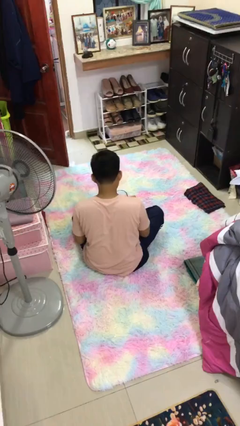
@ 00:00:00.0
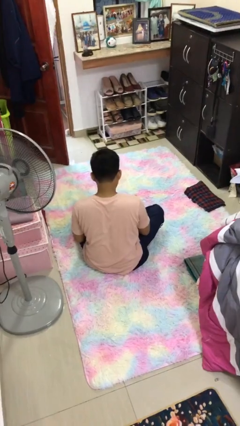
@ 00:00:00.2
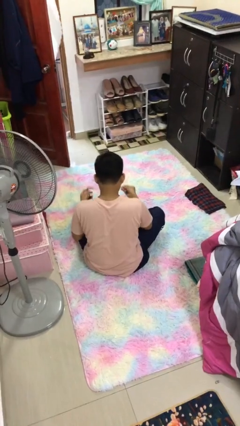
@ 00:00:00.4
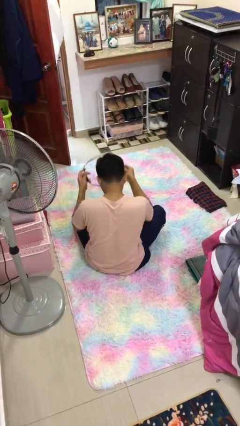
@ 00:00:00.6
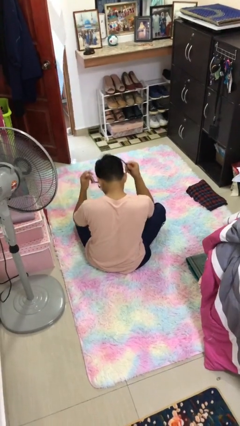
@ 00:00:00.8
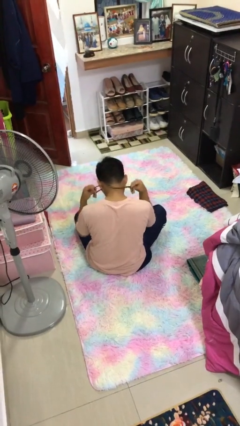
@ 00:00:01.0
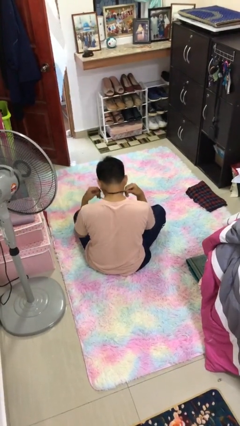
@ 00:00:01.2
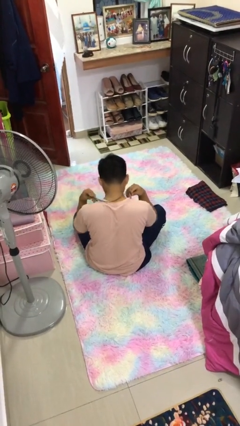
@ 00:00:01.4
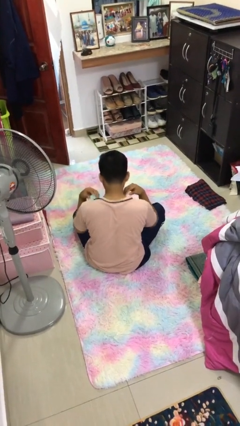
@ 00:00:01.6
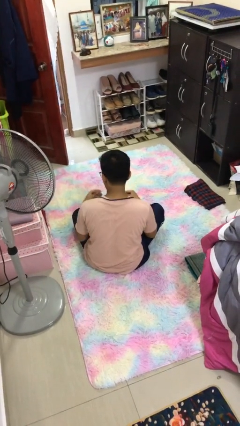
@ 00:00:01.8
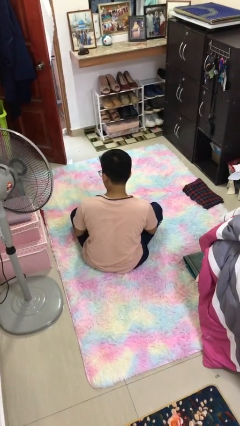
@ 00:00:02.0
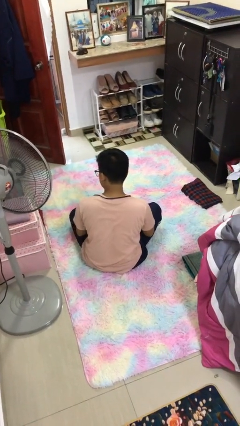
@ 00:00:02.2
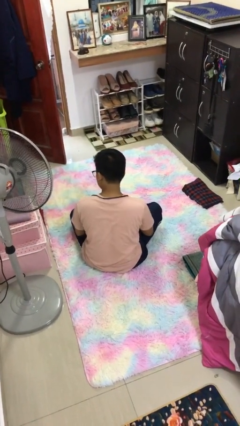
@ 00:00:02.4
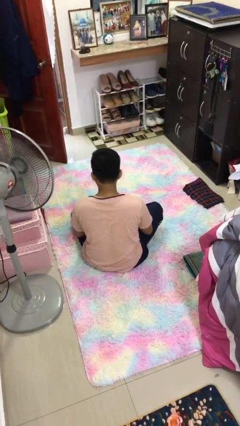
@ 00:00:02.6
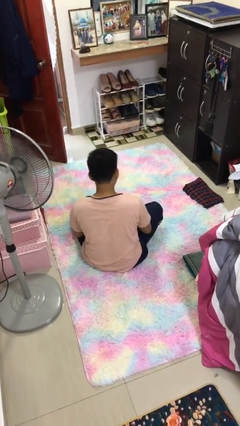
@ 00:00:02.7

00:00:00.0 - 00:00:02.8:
person puts on necklace

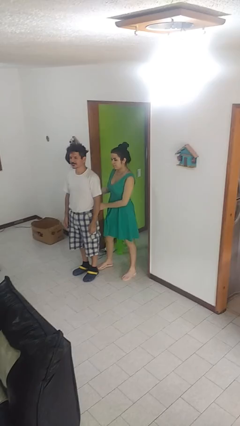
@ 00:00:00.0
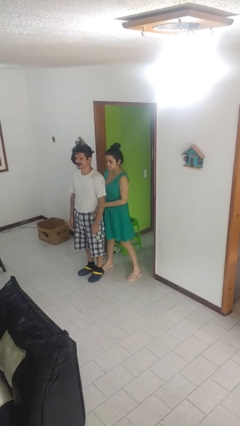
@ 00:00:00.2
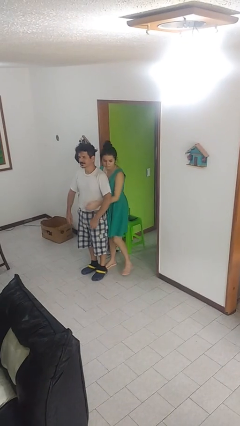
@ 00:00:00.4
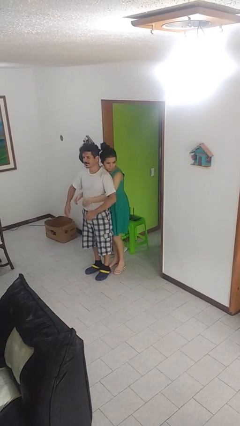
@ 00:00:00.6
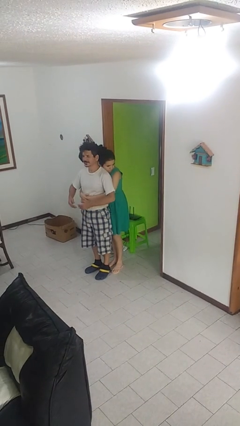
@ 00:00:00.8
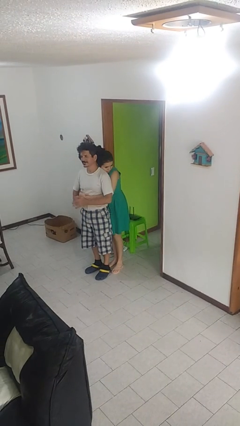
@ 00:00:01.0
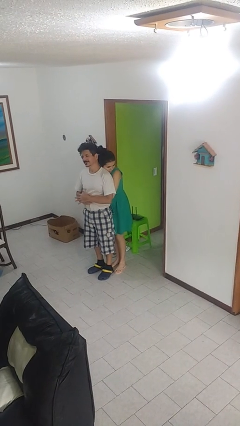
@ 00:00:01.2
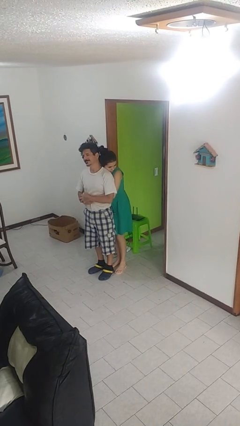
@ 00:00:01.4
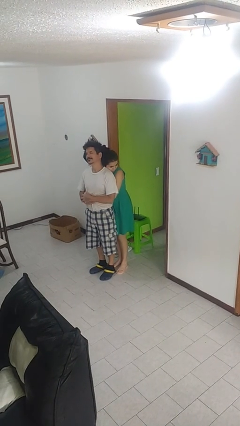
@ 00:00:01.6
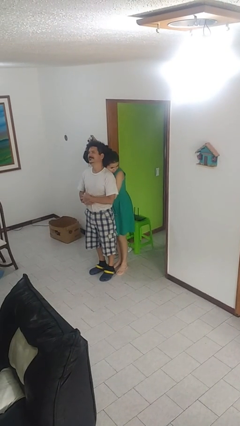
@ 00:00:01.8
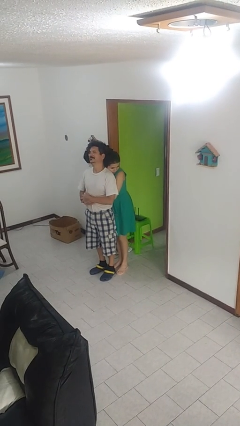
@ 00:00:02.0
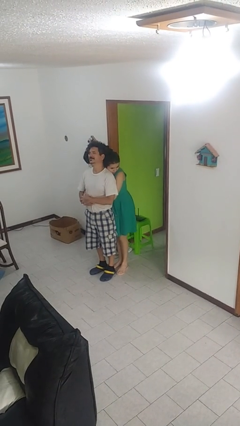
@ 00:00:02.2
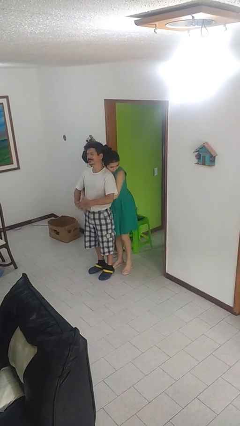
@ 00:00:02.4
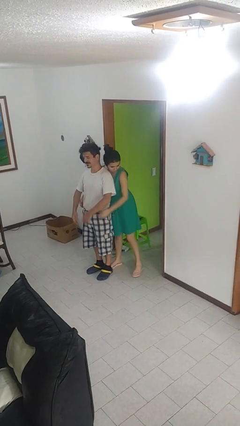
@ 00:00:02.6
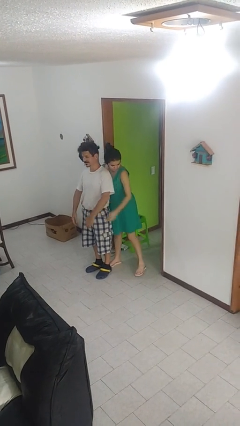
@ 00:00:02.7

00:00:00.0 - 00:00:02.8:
person hugs person from behind

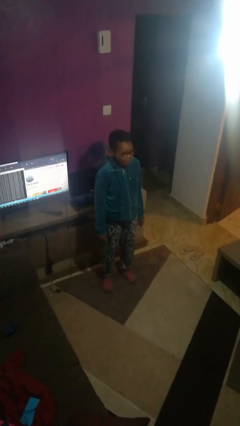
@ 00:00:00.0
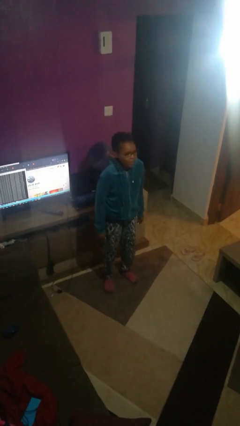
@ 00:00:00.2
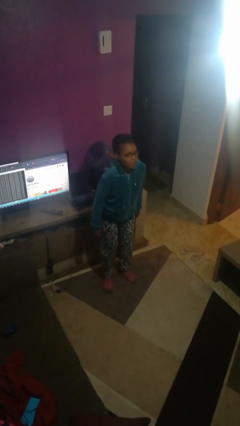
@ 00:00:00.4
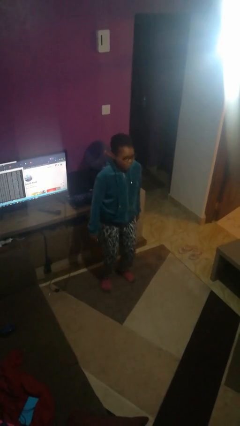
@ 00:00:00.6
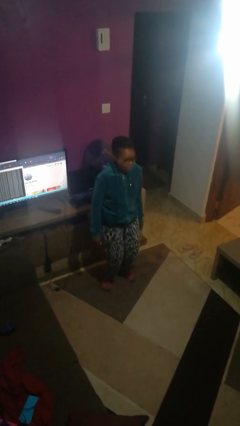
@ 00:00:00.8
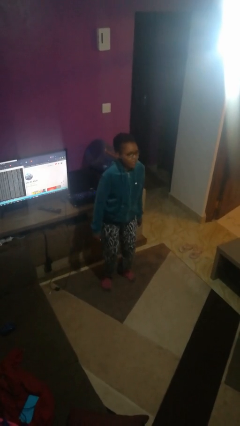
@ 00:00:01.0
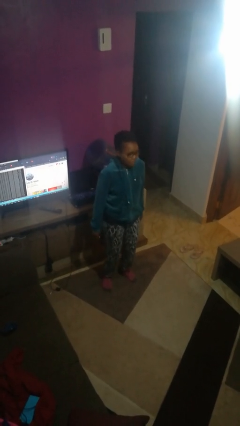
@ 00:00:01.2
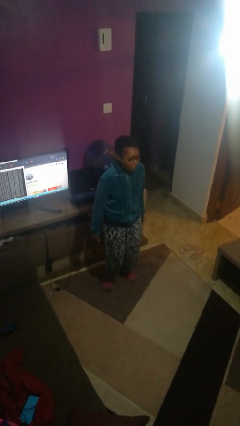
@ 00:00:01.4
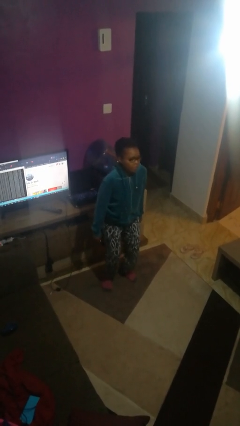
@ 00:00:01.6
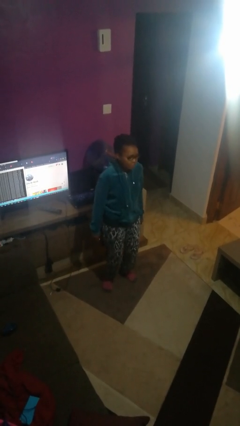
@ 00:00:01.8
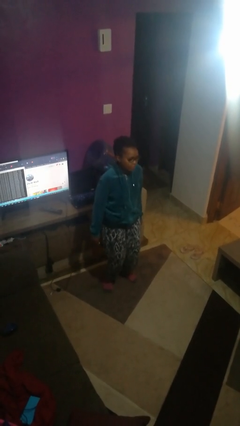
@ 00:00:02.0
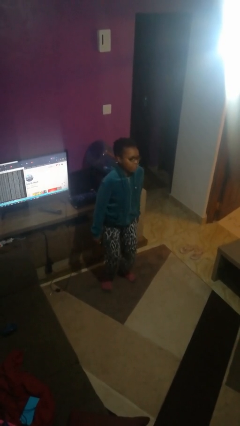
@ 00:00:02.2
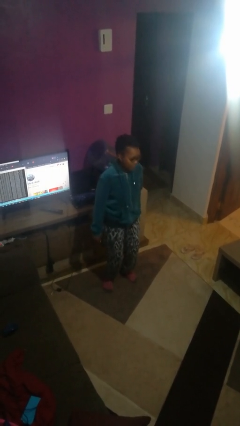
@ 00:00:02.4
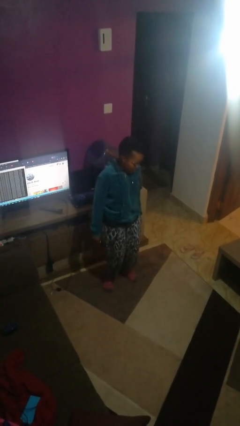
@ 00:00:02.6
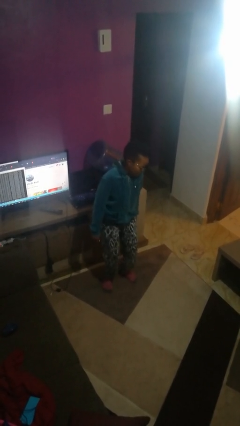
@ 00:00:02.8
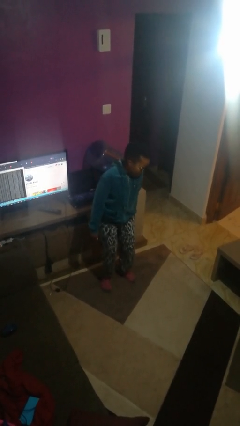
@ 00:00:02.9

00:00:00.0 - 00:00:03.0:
person wiggles hips

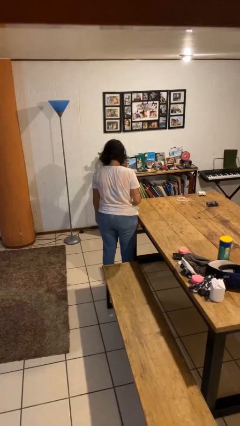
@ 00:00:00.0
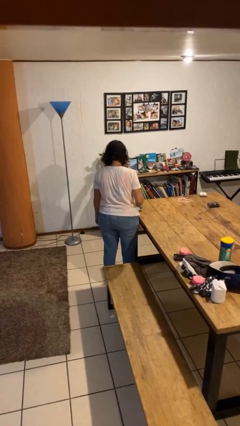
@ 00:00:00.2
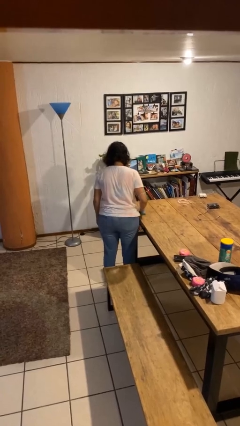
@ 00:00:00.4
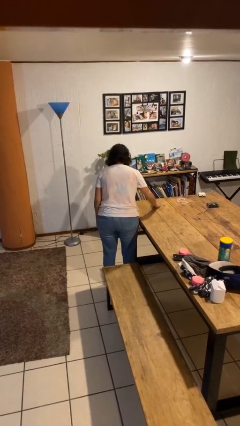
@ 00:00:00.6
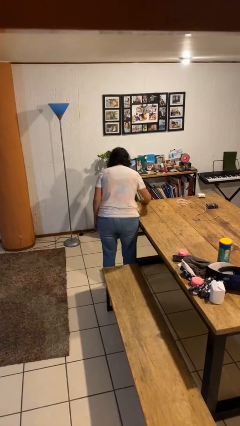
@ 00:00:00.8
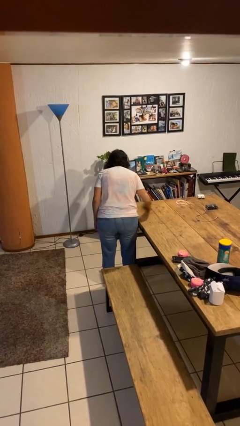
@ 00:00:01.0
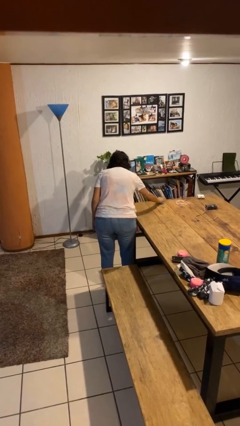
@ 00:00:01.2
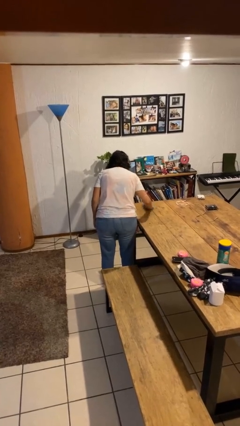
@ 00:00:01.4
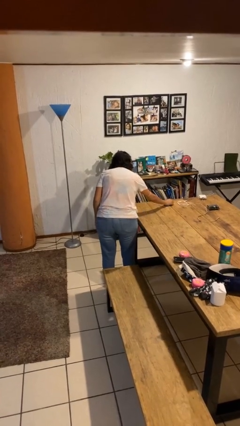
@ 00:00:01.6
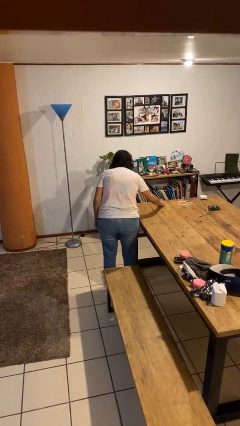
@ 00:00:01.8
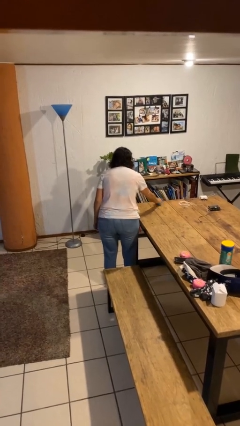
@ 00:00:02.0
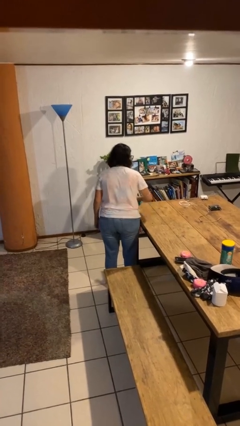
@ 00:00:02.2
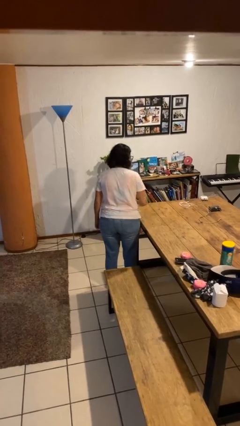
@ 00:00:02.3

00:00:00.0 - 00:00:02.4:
person cleans table with rag

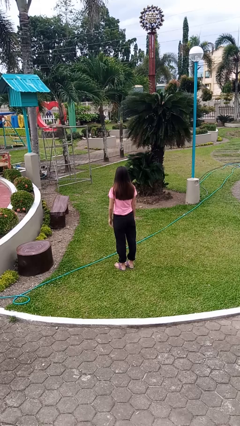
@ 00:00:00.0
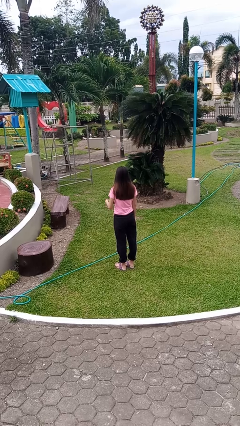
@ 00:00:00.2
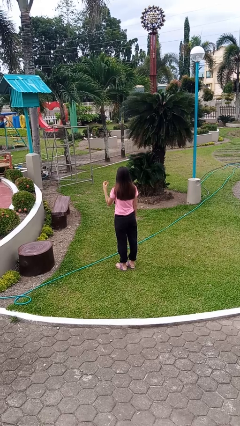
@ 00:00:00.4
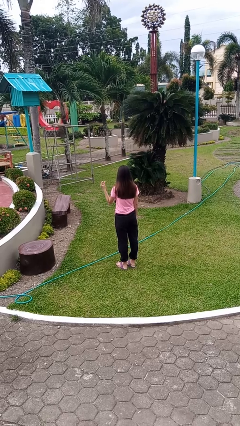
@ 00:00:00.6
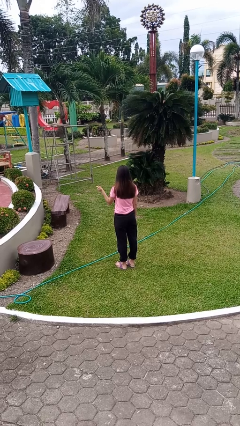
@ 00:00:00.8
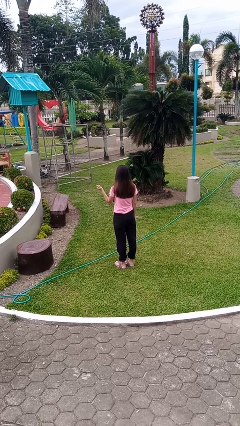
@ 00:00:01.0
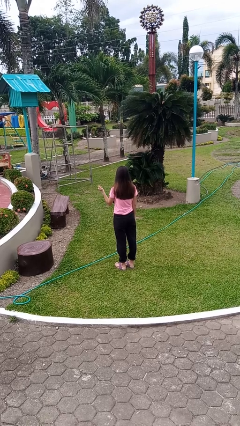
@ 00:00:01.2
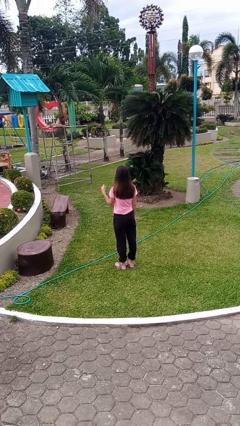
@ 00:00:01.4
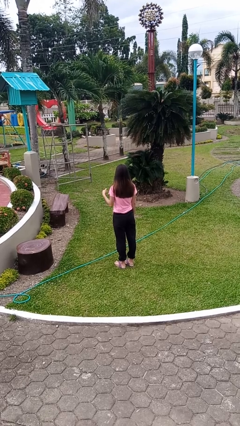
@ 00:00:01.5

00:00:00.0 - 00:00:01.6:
person snaps fingers

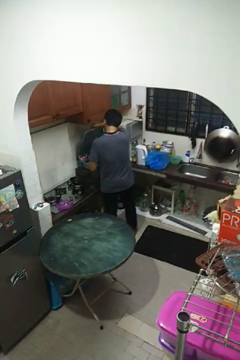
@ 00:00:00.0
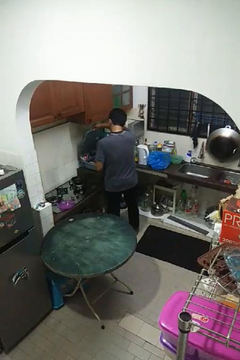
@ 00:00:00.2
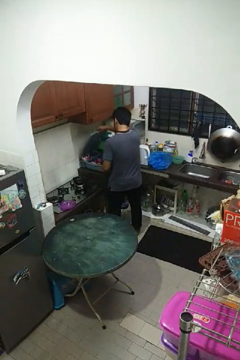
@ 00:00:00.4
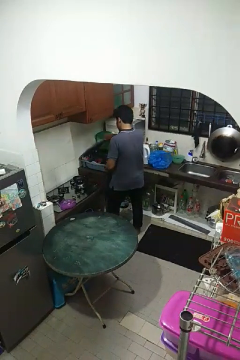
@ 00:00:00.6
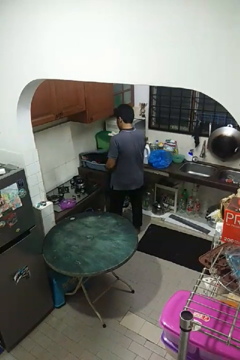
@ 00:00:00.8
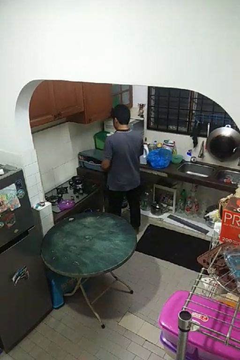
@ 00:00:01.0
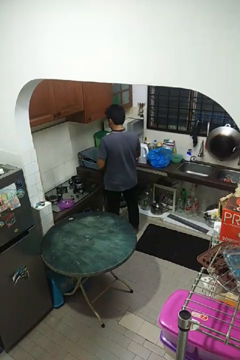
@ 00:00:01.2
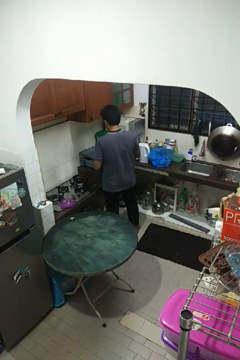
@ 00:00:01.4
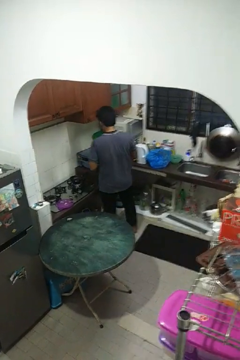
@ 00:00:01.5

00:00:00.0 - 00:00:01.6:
person closes dishwasher

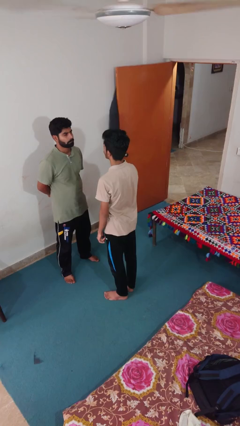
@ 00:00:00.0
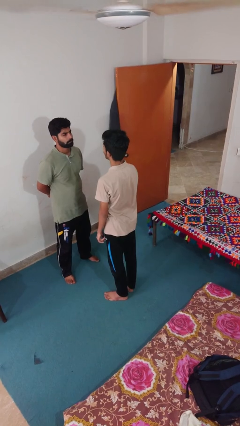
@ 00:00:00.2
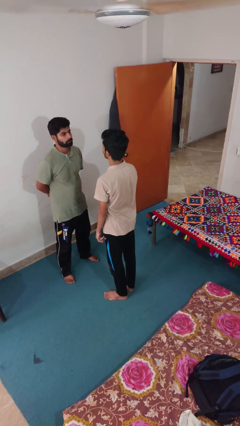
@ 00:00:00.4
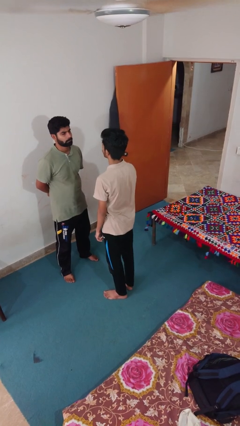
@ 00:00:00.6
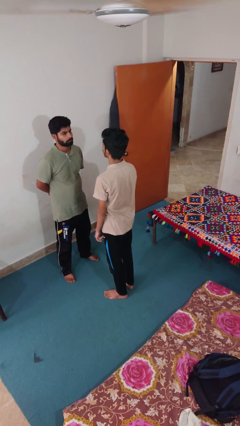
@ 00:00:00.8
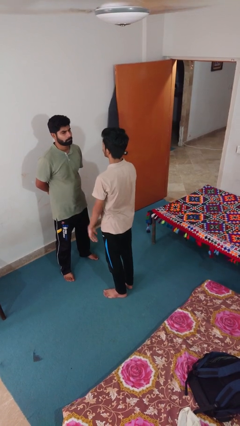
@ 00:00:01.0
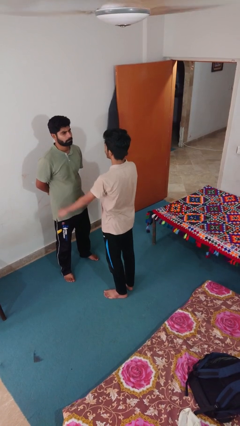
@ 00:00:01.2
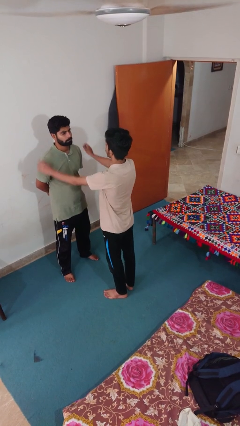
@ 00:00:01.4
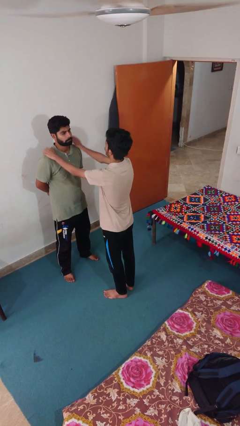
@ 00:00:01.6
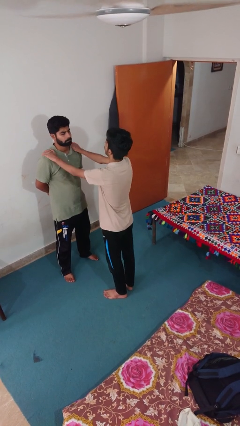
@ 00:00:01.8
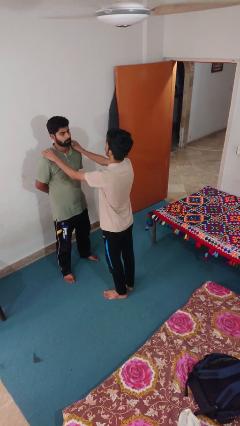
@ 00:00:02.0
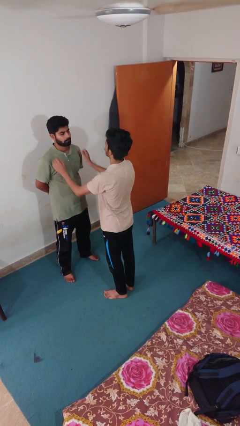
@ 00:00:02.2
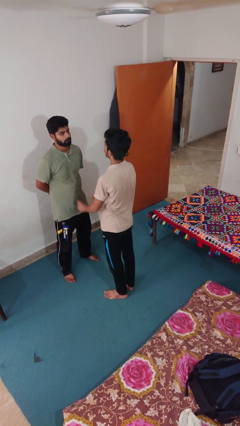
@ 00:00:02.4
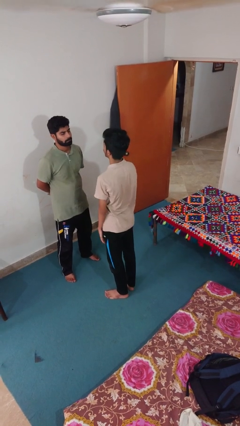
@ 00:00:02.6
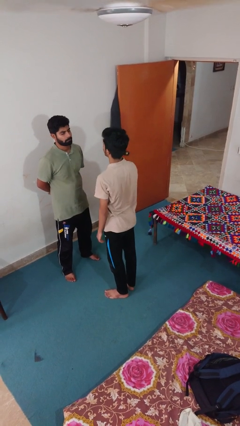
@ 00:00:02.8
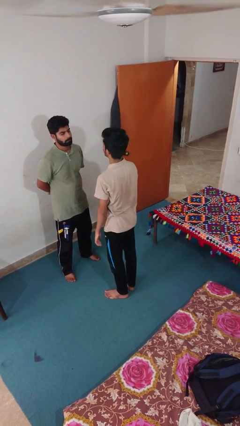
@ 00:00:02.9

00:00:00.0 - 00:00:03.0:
person pounds shoulders of person
